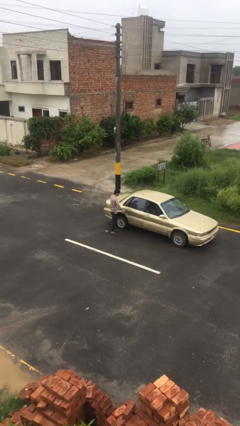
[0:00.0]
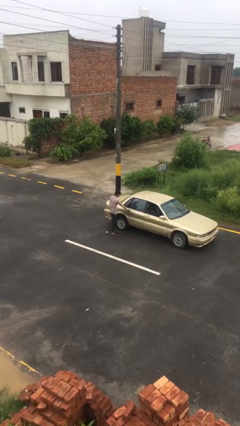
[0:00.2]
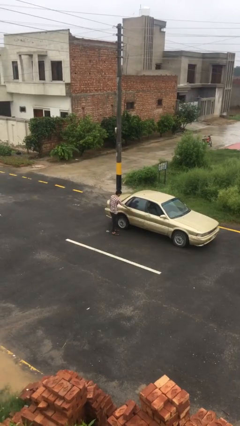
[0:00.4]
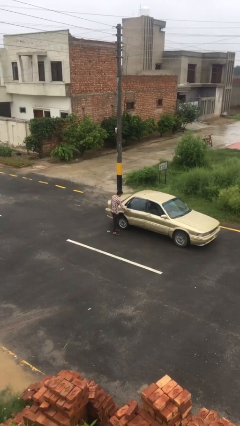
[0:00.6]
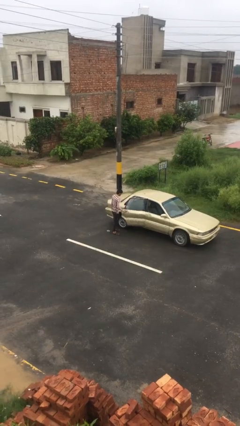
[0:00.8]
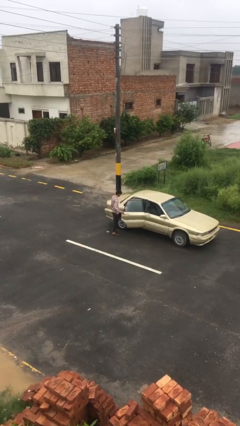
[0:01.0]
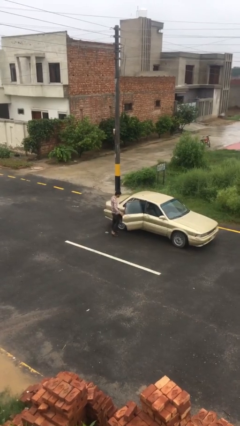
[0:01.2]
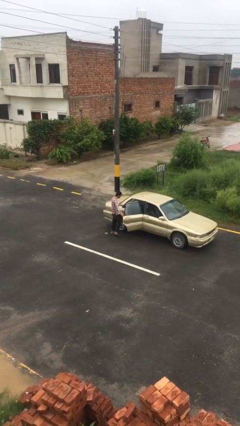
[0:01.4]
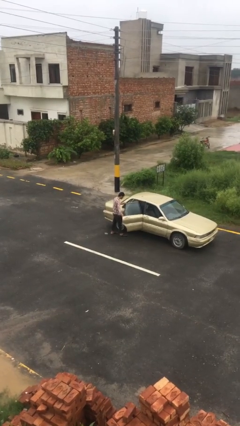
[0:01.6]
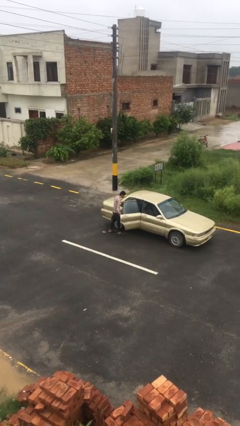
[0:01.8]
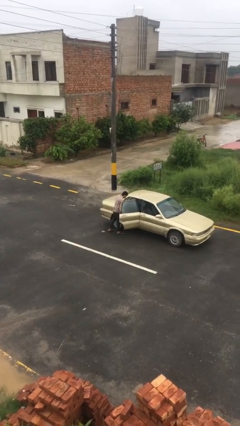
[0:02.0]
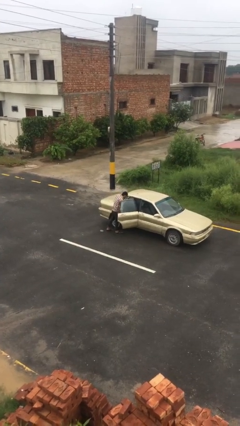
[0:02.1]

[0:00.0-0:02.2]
person opens car door

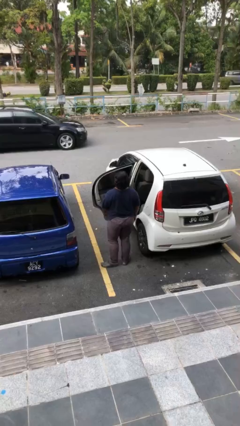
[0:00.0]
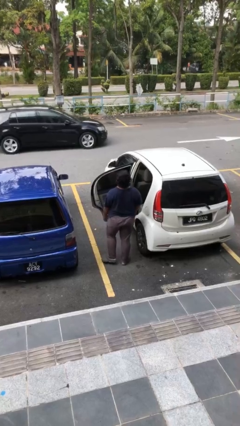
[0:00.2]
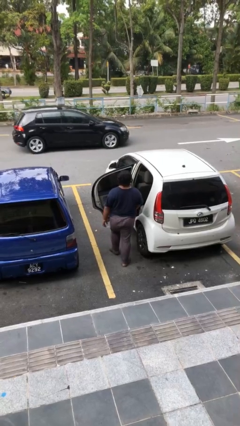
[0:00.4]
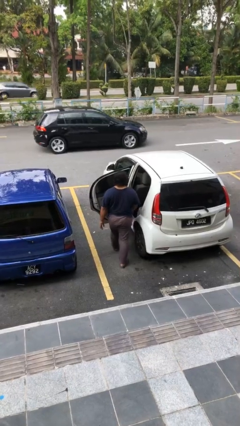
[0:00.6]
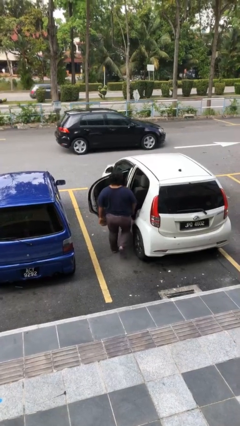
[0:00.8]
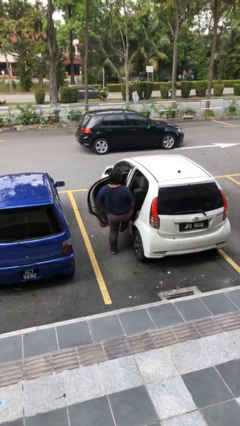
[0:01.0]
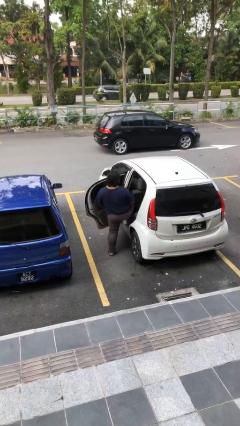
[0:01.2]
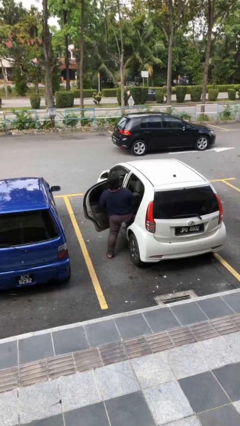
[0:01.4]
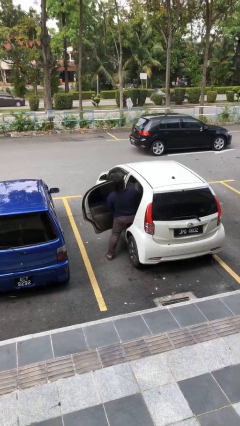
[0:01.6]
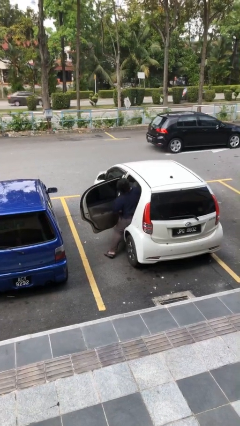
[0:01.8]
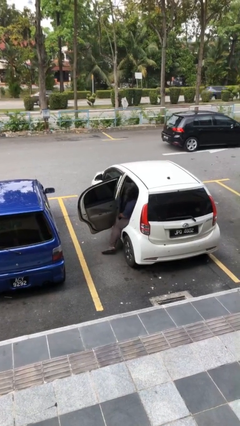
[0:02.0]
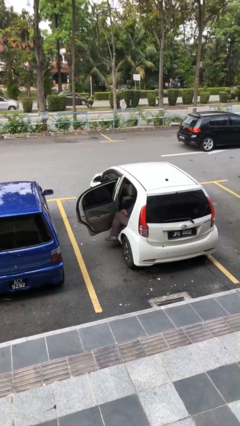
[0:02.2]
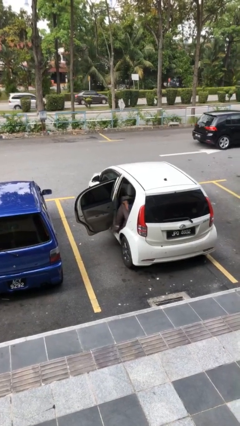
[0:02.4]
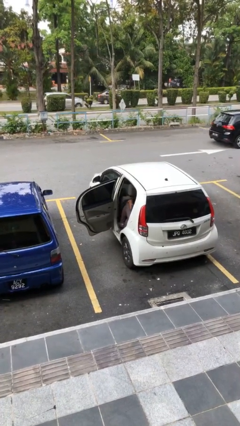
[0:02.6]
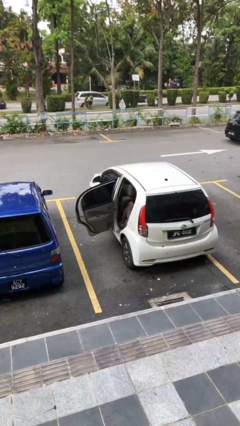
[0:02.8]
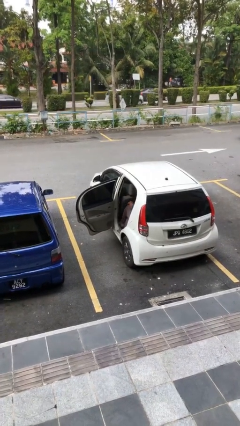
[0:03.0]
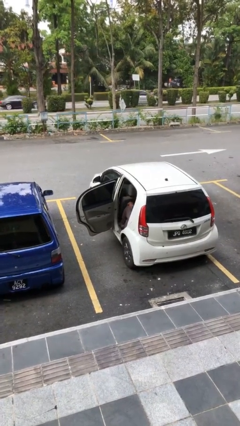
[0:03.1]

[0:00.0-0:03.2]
person enters car

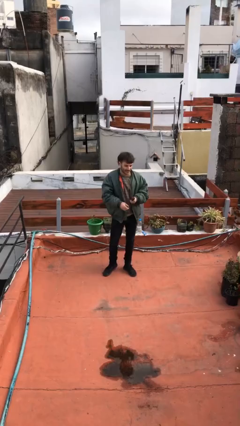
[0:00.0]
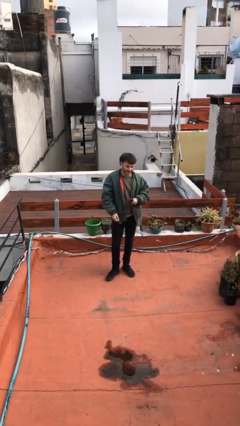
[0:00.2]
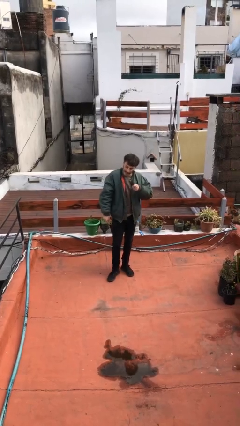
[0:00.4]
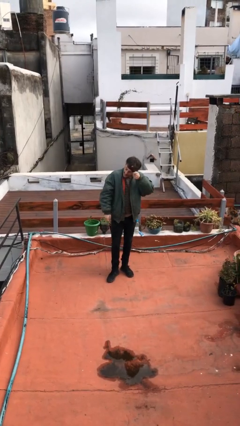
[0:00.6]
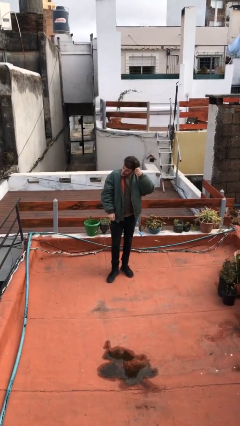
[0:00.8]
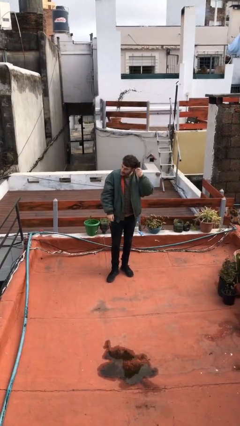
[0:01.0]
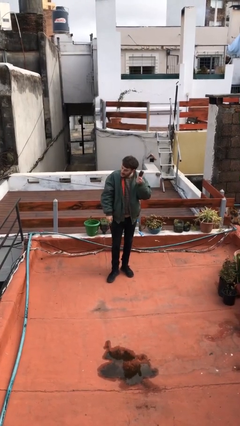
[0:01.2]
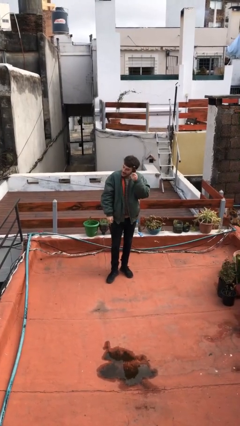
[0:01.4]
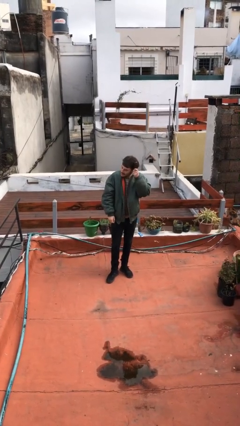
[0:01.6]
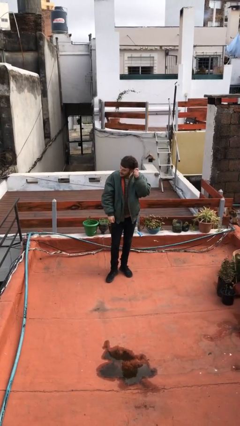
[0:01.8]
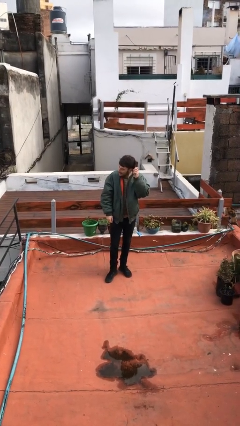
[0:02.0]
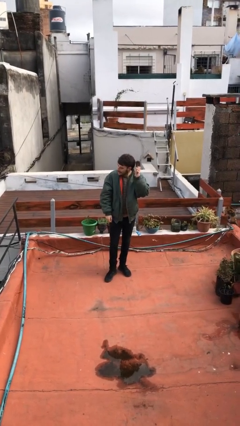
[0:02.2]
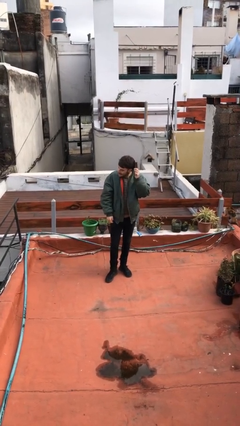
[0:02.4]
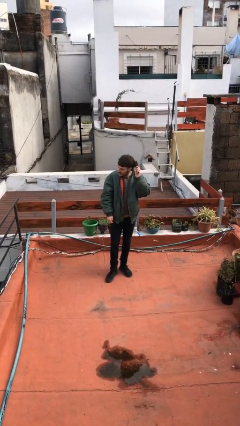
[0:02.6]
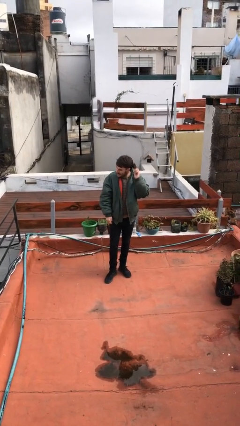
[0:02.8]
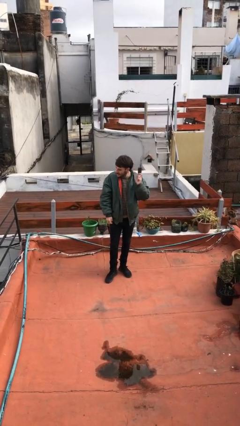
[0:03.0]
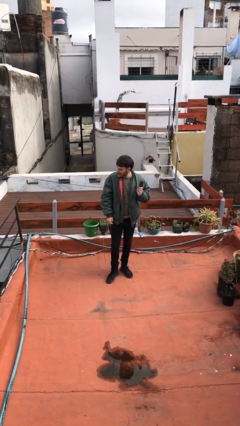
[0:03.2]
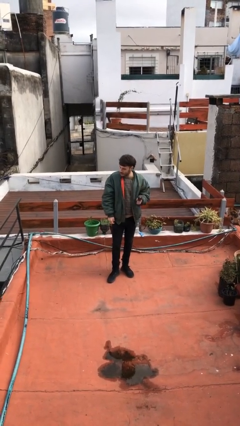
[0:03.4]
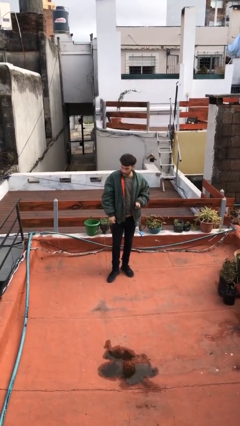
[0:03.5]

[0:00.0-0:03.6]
person brushes hair

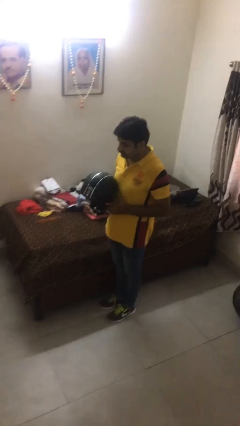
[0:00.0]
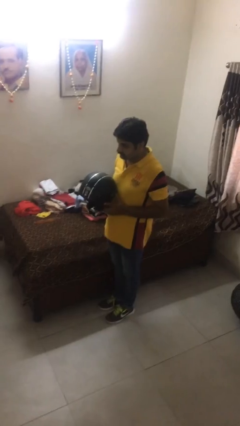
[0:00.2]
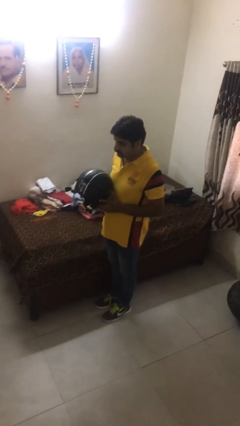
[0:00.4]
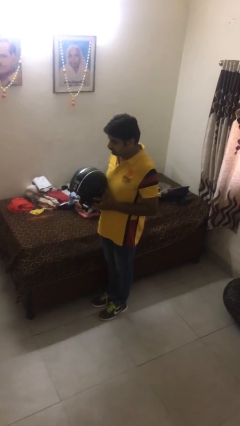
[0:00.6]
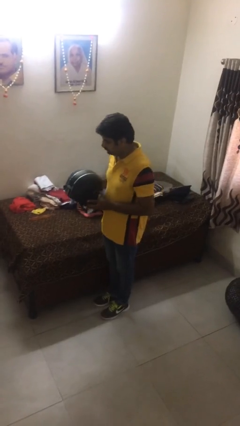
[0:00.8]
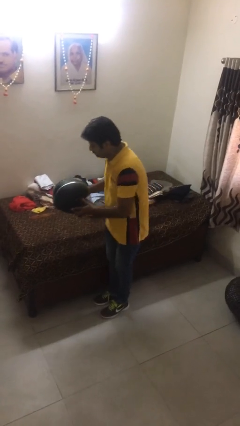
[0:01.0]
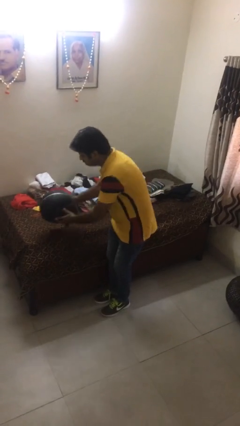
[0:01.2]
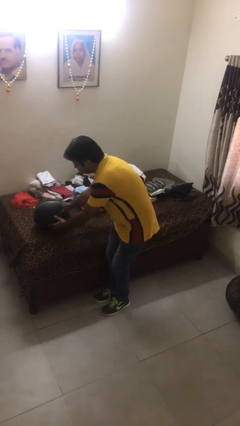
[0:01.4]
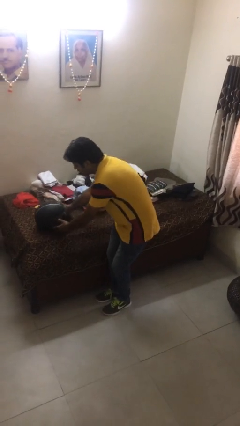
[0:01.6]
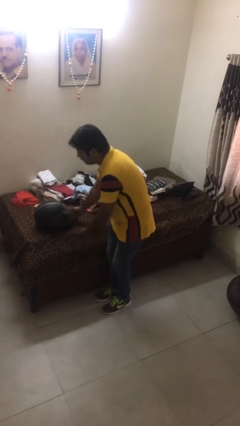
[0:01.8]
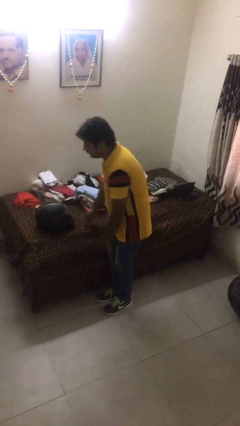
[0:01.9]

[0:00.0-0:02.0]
person puts down object on bed

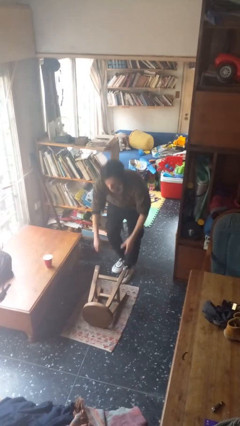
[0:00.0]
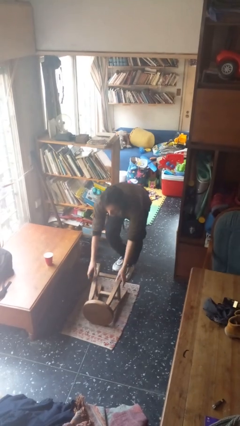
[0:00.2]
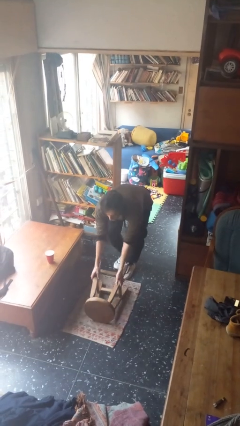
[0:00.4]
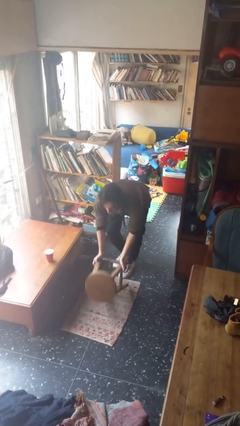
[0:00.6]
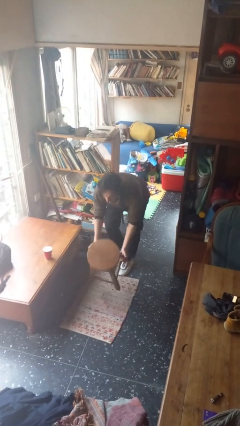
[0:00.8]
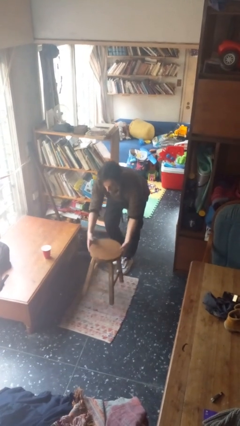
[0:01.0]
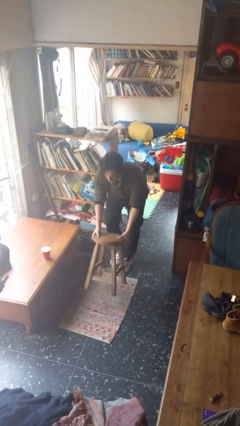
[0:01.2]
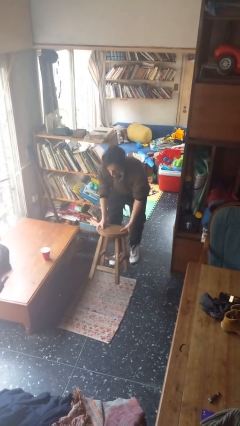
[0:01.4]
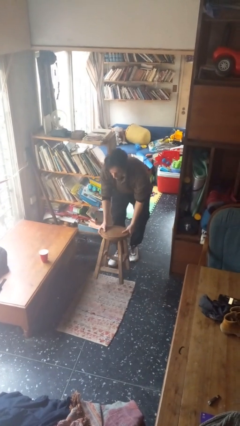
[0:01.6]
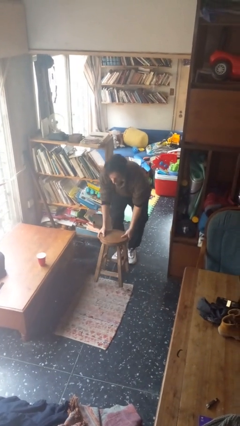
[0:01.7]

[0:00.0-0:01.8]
person sets upright furniture

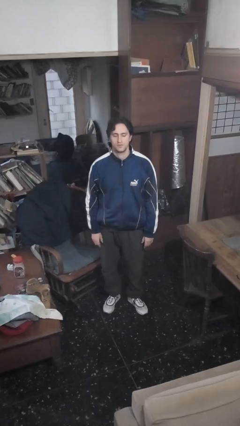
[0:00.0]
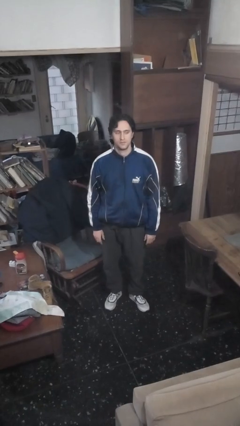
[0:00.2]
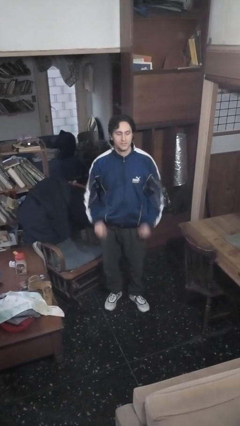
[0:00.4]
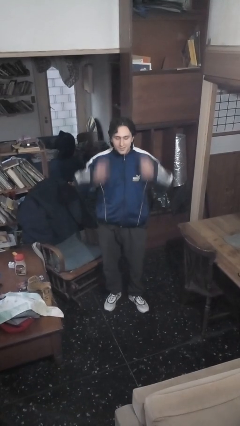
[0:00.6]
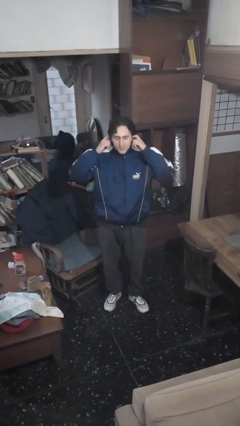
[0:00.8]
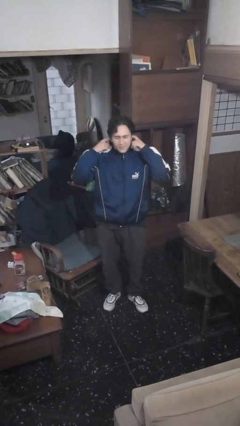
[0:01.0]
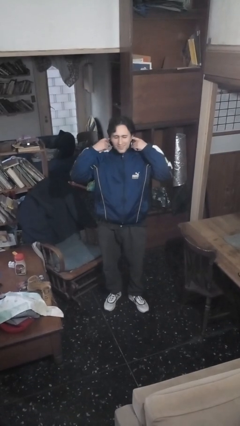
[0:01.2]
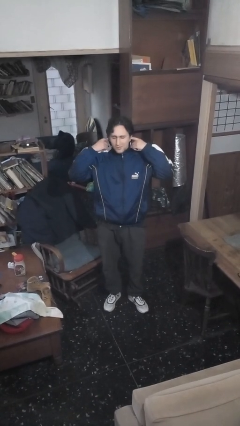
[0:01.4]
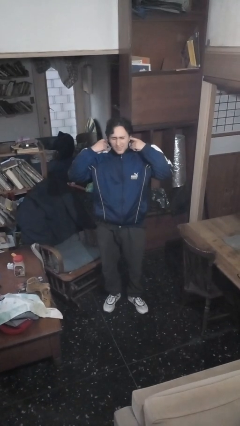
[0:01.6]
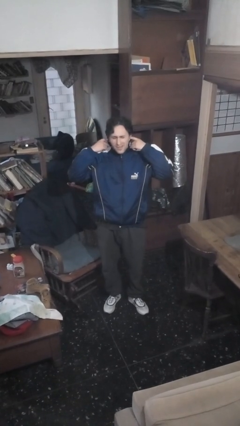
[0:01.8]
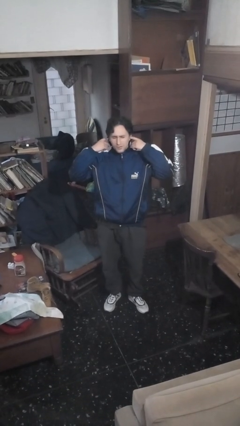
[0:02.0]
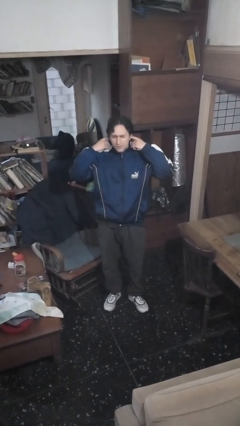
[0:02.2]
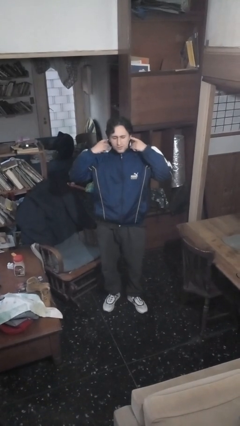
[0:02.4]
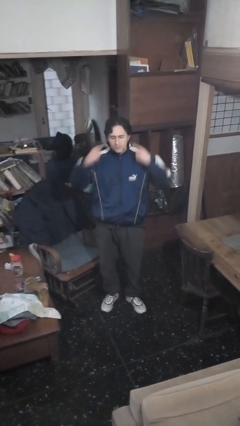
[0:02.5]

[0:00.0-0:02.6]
person puts fingers in ear

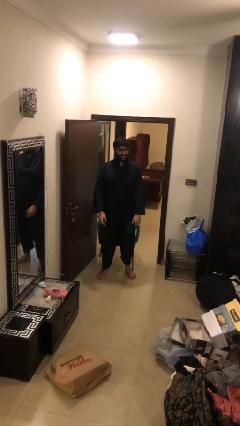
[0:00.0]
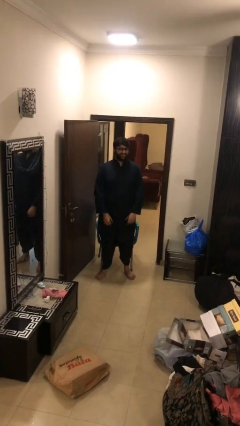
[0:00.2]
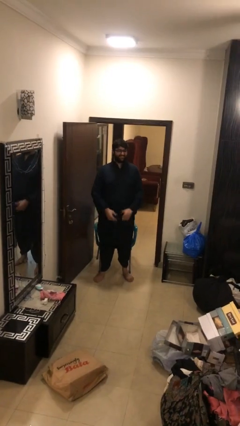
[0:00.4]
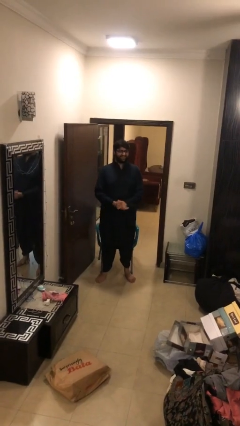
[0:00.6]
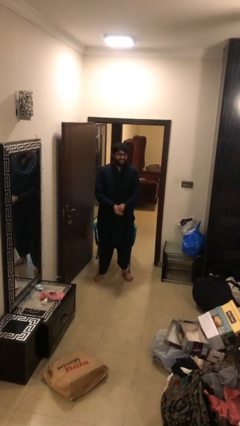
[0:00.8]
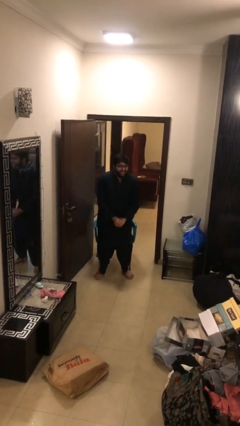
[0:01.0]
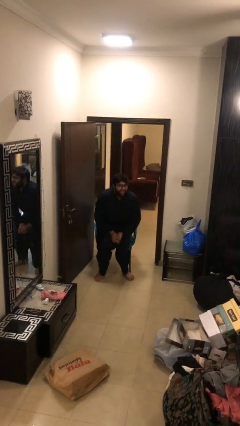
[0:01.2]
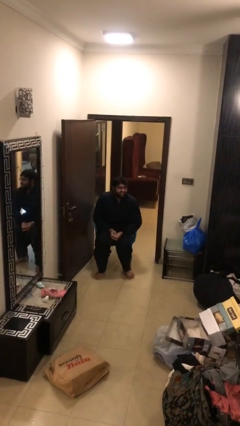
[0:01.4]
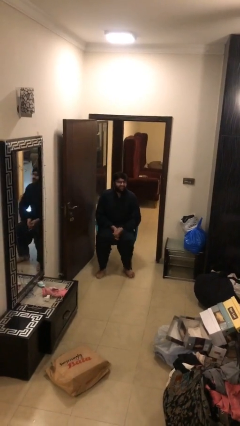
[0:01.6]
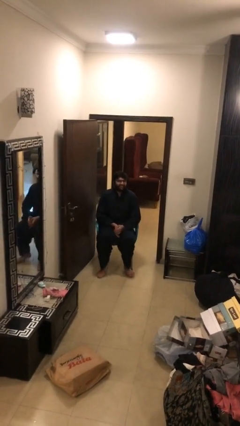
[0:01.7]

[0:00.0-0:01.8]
person sits down
